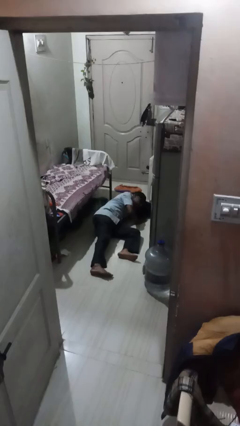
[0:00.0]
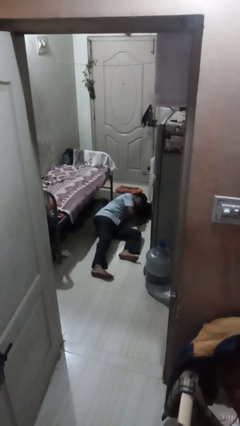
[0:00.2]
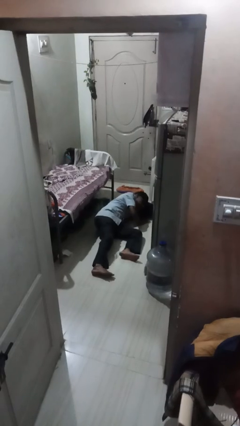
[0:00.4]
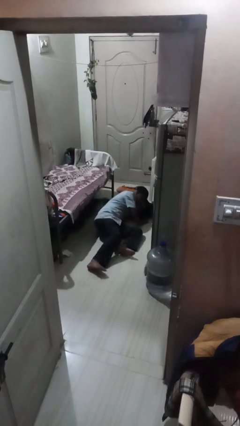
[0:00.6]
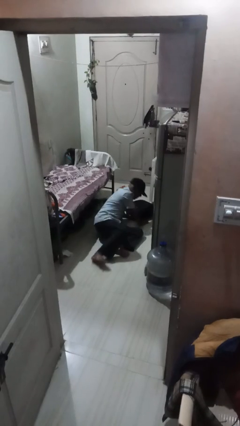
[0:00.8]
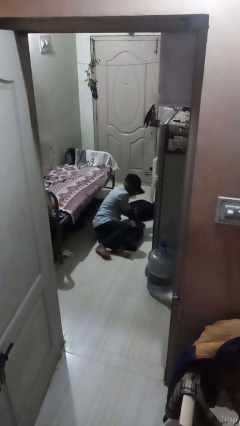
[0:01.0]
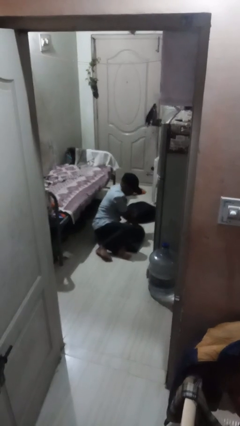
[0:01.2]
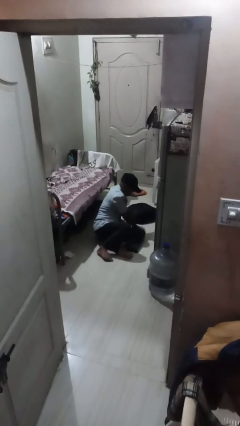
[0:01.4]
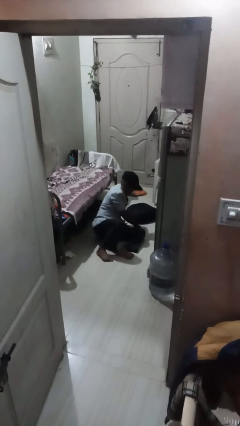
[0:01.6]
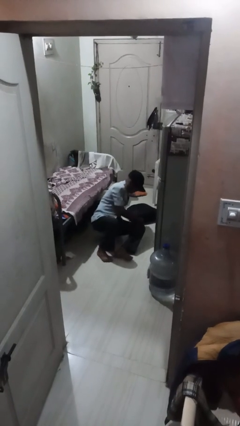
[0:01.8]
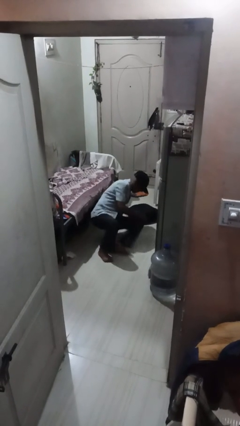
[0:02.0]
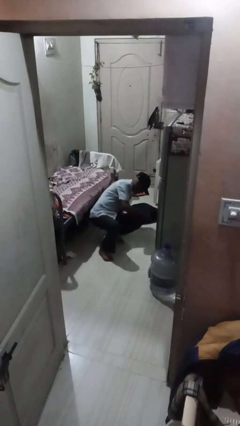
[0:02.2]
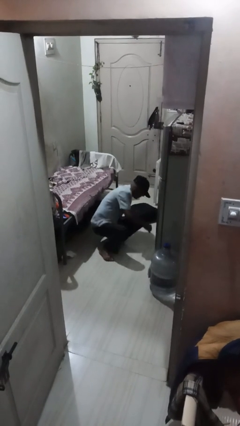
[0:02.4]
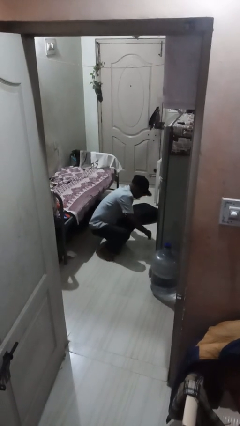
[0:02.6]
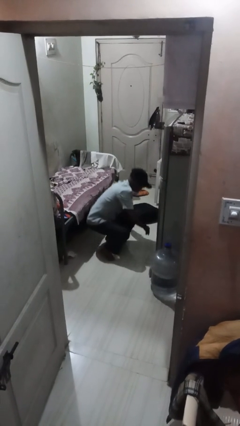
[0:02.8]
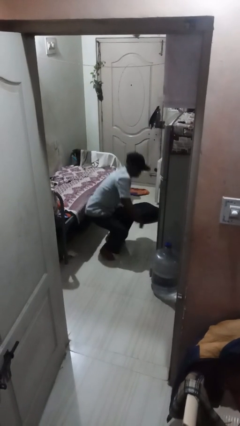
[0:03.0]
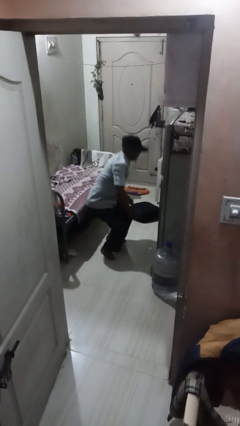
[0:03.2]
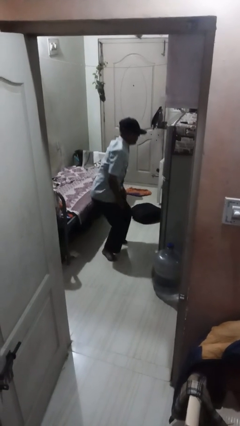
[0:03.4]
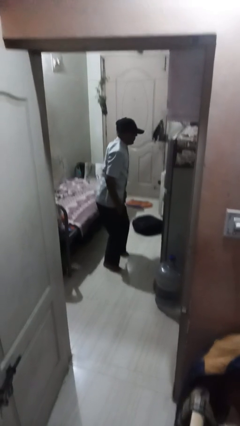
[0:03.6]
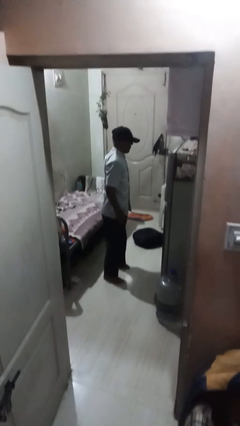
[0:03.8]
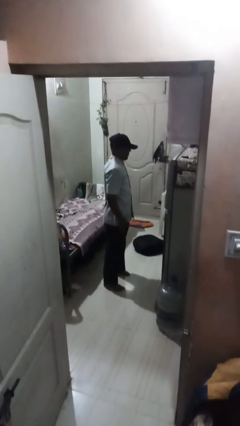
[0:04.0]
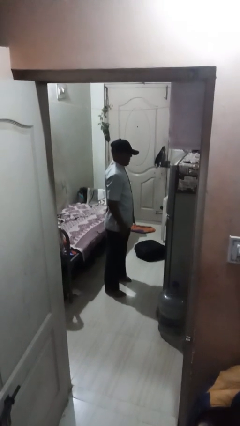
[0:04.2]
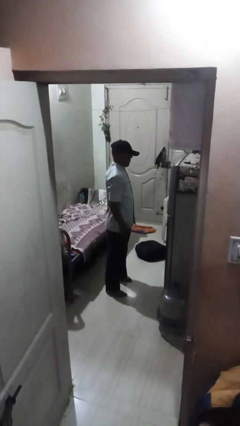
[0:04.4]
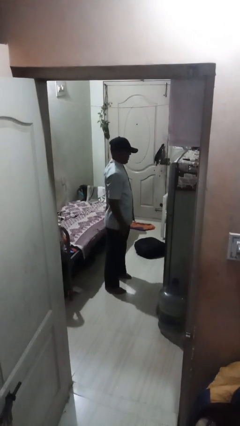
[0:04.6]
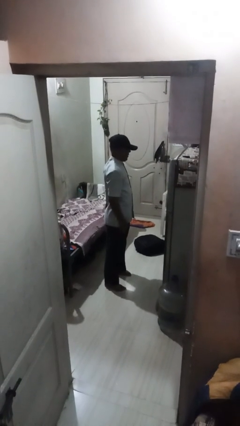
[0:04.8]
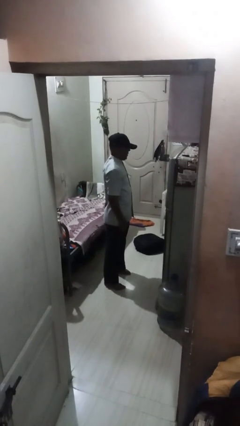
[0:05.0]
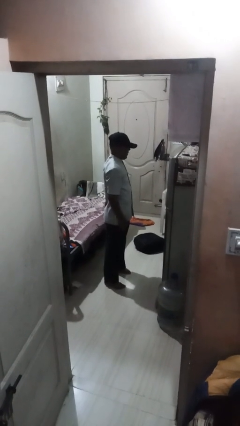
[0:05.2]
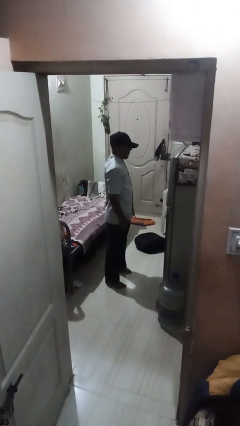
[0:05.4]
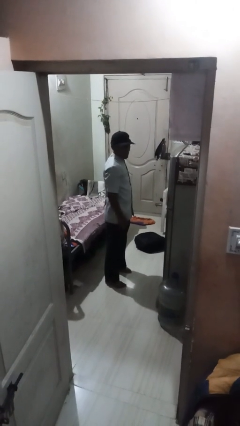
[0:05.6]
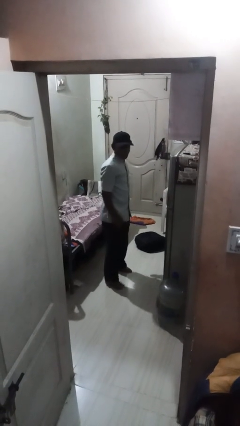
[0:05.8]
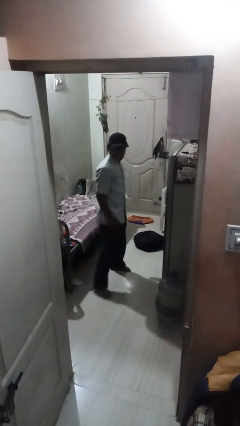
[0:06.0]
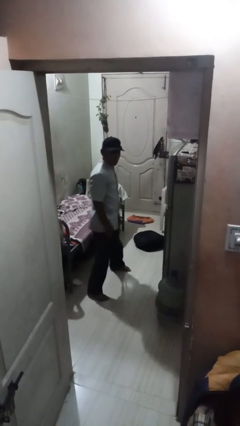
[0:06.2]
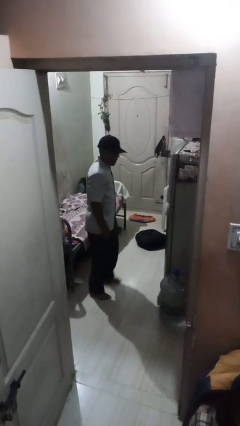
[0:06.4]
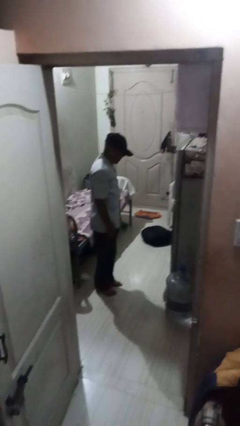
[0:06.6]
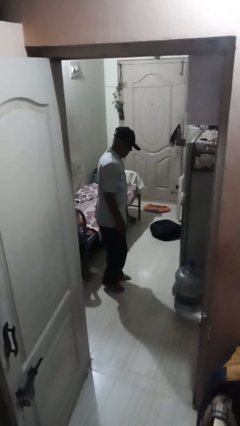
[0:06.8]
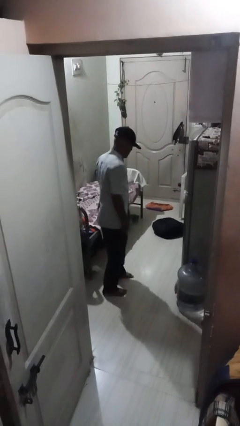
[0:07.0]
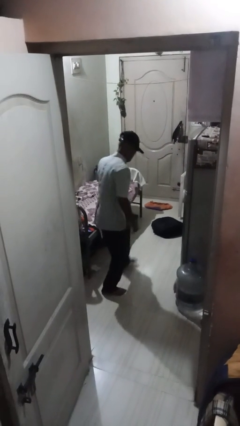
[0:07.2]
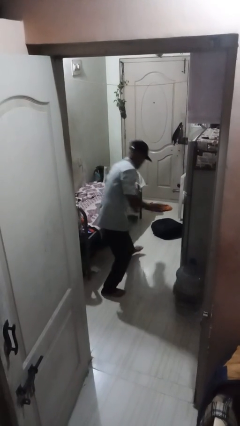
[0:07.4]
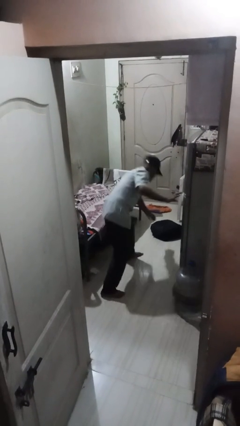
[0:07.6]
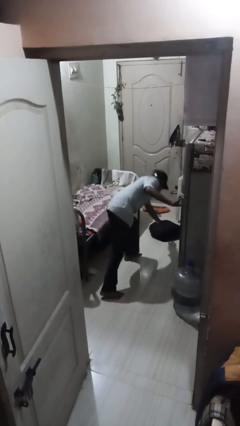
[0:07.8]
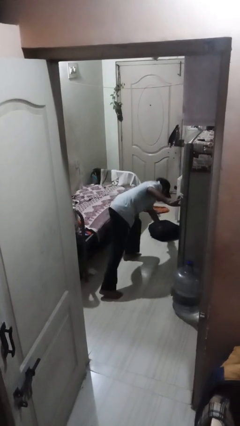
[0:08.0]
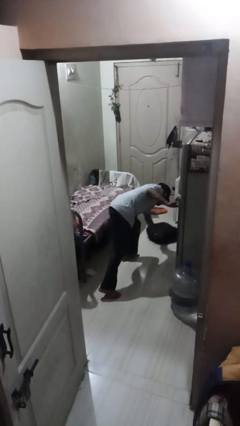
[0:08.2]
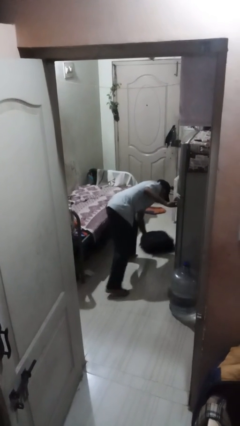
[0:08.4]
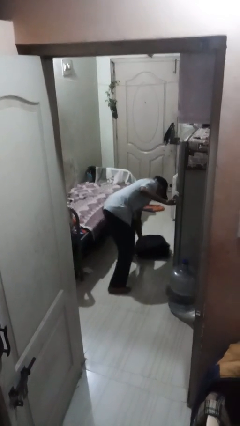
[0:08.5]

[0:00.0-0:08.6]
person stands up from floor

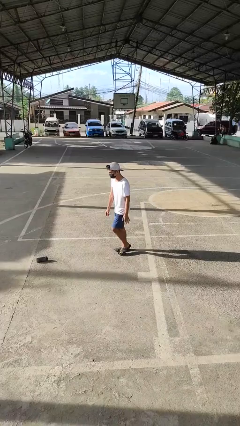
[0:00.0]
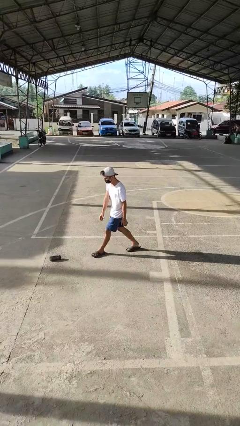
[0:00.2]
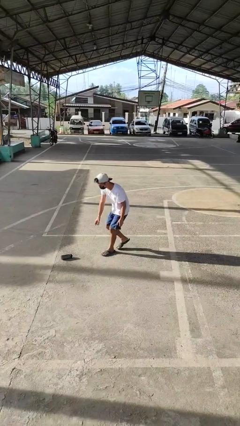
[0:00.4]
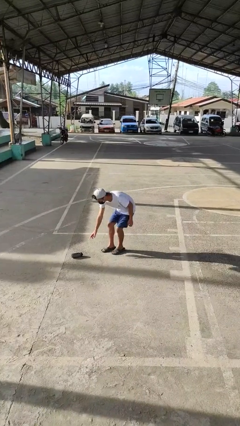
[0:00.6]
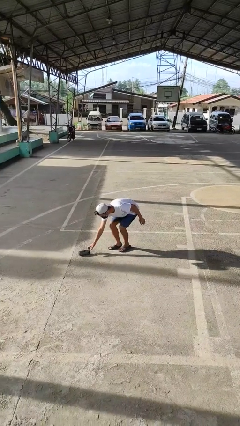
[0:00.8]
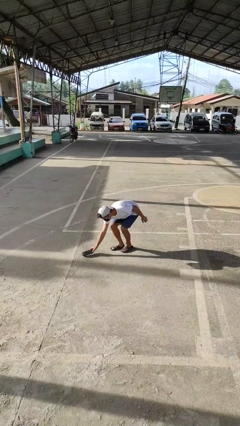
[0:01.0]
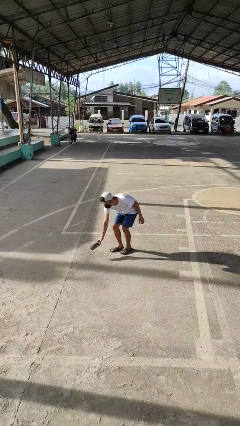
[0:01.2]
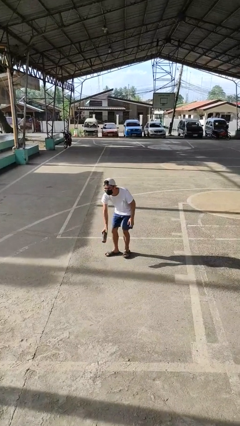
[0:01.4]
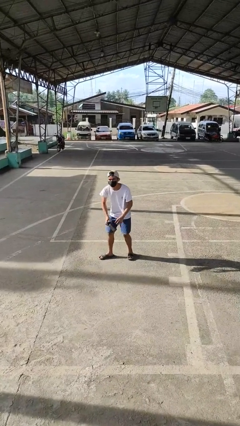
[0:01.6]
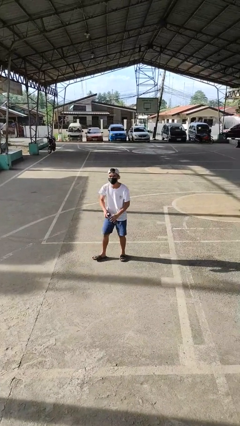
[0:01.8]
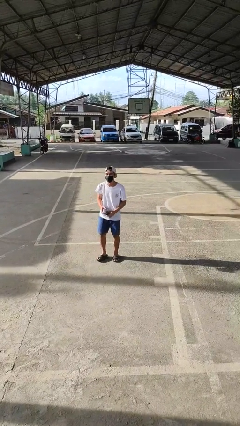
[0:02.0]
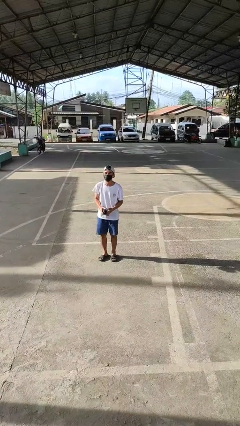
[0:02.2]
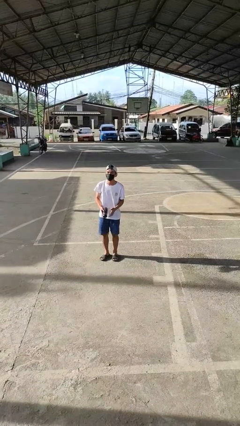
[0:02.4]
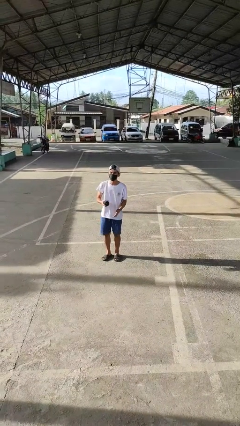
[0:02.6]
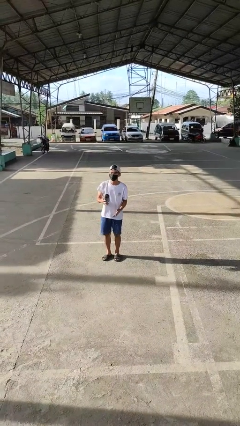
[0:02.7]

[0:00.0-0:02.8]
person picks up object from floor

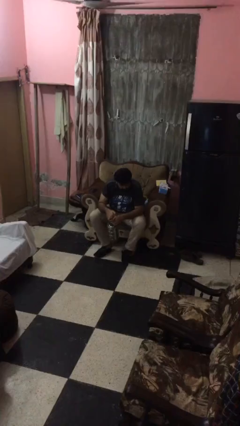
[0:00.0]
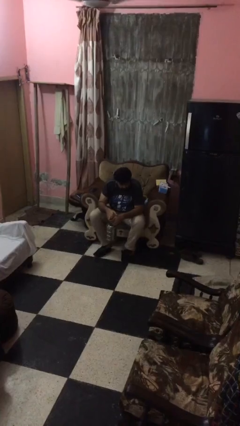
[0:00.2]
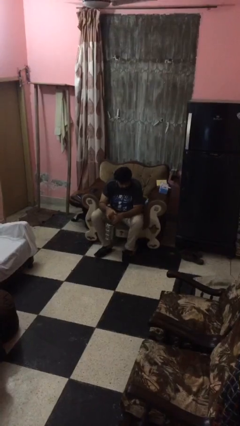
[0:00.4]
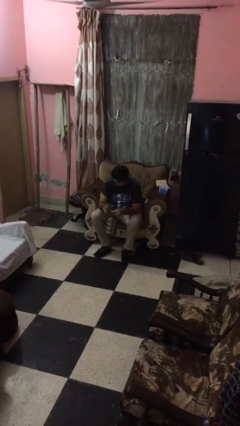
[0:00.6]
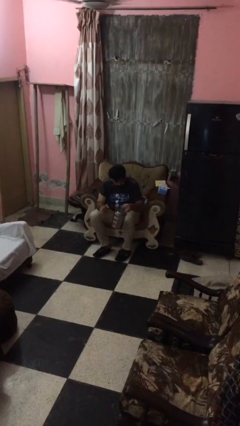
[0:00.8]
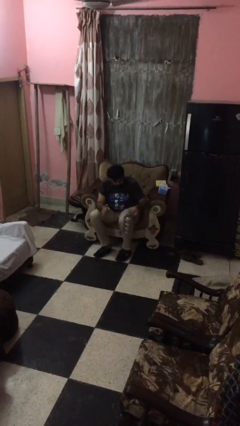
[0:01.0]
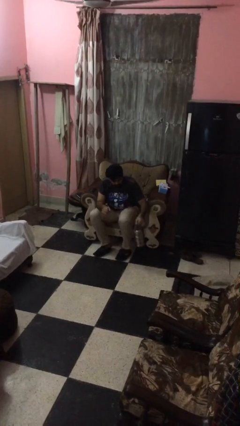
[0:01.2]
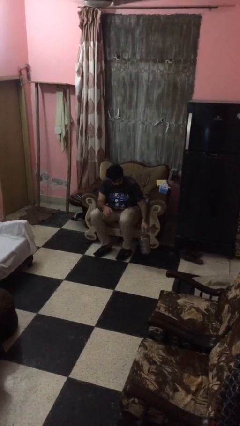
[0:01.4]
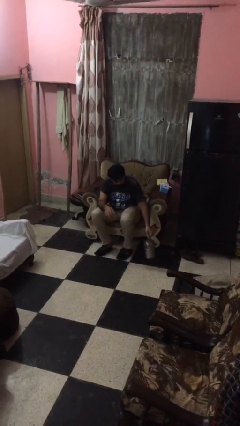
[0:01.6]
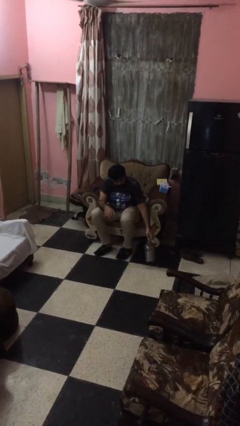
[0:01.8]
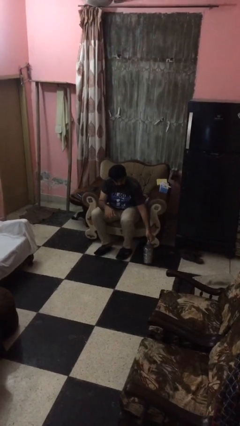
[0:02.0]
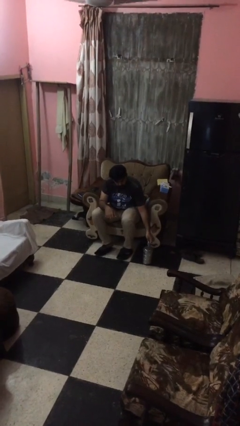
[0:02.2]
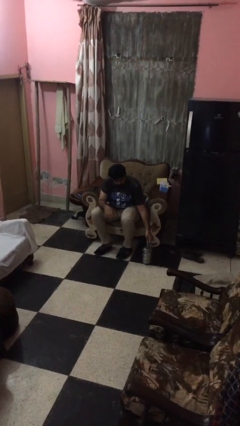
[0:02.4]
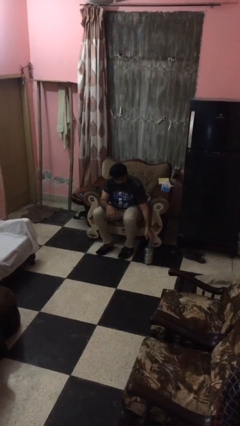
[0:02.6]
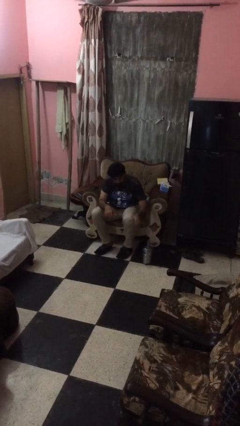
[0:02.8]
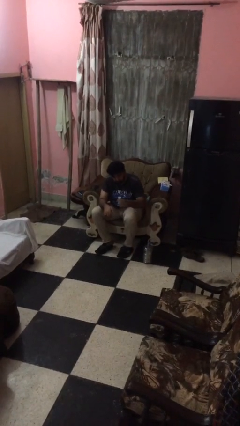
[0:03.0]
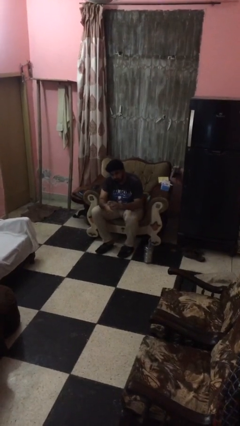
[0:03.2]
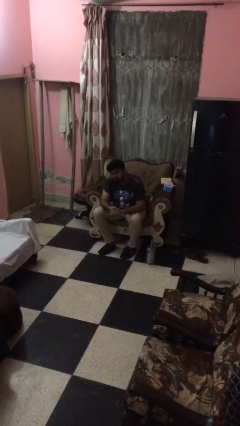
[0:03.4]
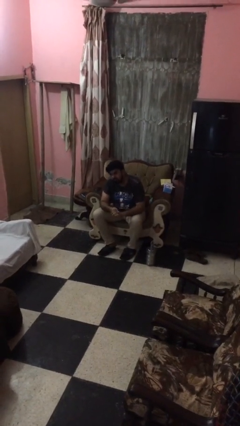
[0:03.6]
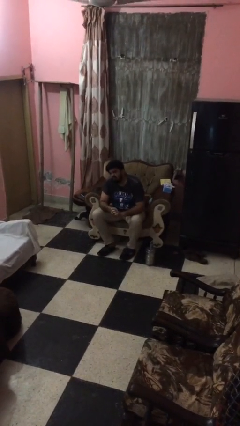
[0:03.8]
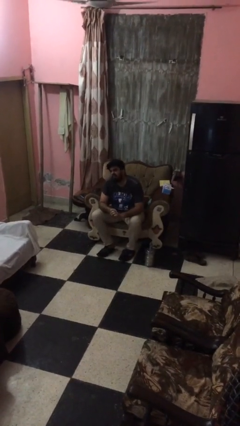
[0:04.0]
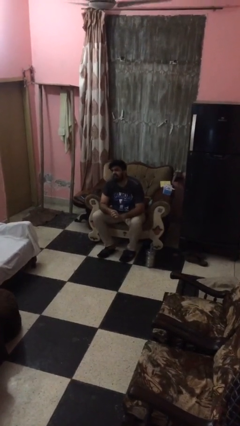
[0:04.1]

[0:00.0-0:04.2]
person puts down object on floor

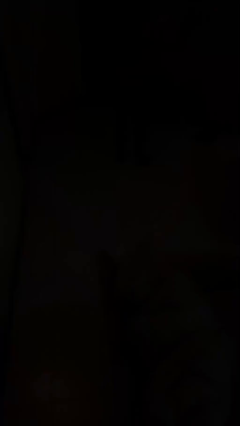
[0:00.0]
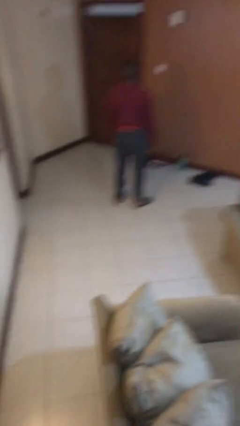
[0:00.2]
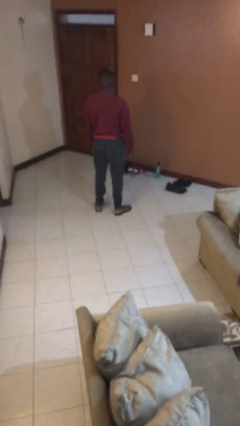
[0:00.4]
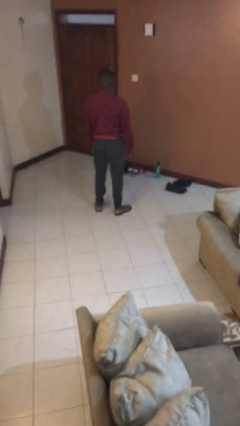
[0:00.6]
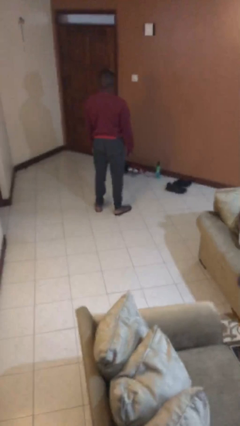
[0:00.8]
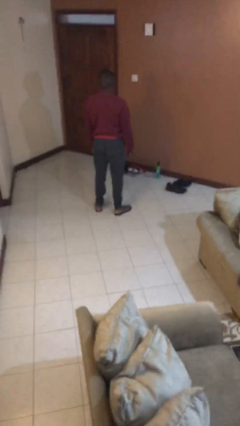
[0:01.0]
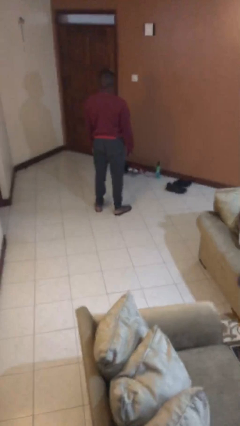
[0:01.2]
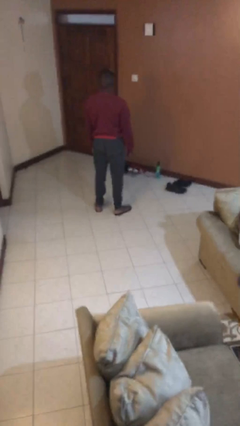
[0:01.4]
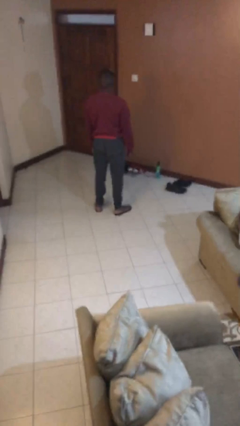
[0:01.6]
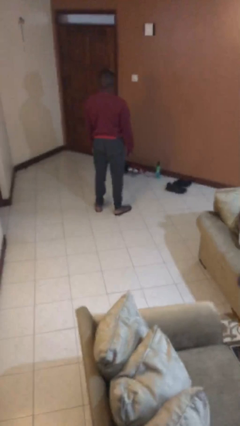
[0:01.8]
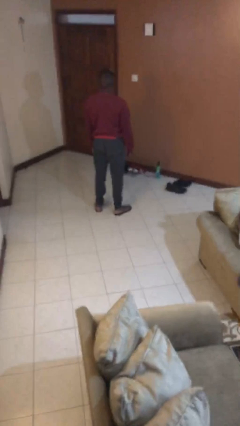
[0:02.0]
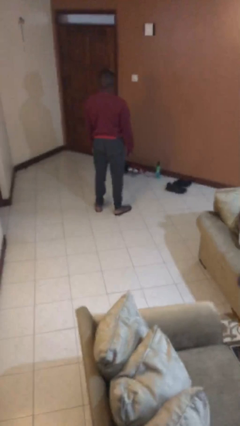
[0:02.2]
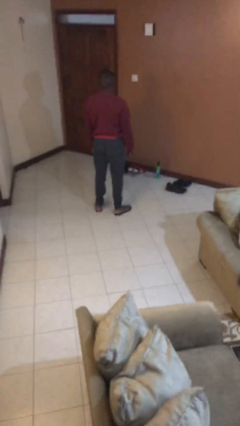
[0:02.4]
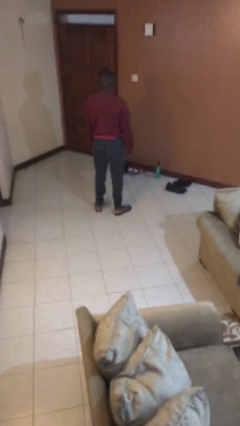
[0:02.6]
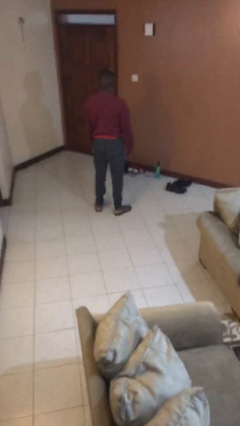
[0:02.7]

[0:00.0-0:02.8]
person gestures swipe down
